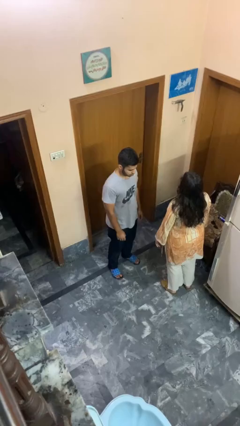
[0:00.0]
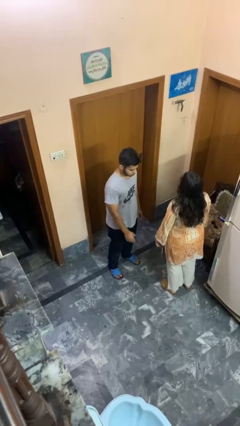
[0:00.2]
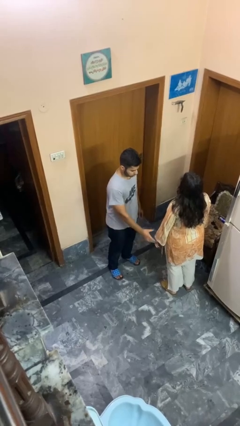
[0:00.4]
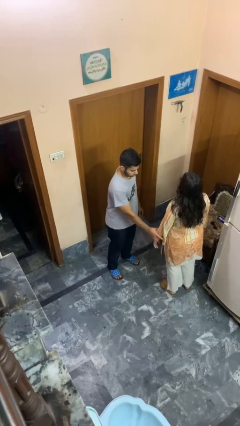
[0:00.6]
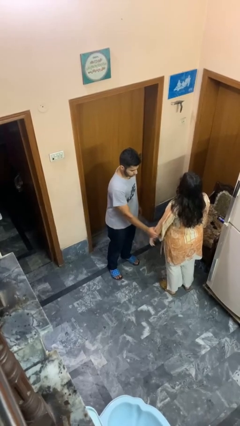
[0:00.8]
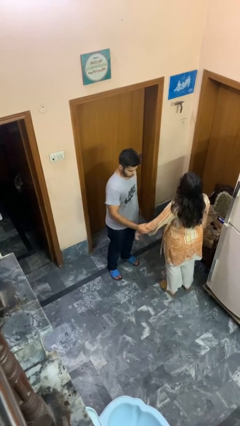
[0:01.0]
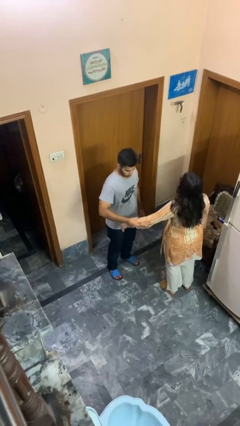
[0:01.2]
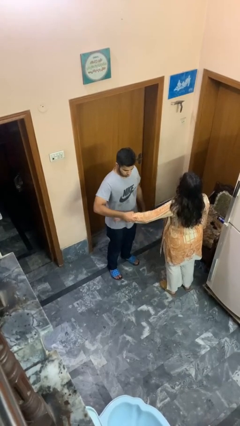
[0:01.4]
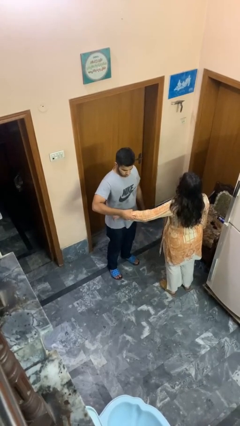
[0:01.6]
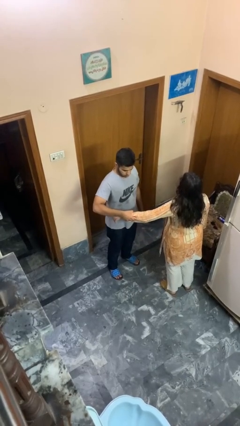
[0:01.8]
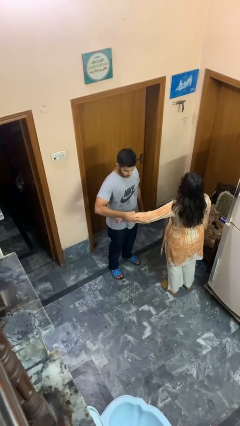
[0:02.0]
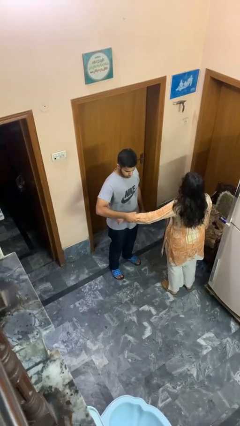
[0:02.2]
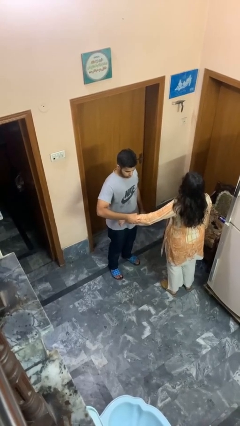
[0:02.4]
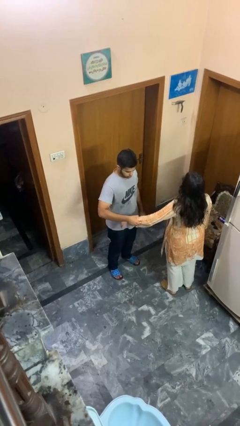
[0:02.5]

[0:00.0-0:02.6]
person grabs person by forearm

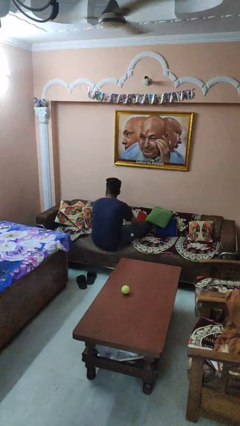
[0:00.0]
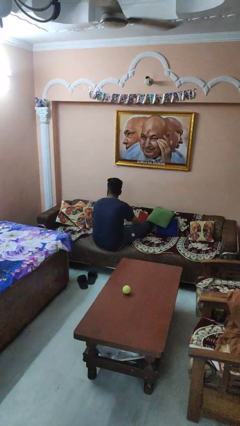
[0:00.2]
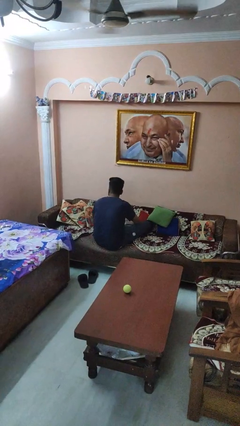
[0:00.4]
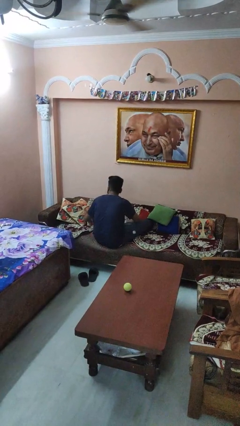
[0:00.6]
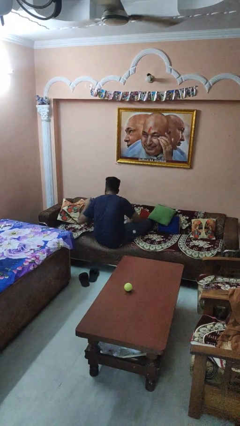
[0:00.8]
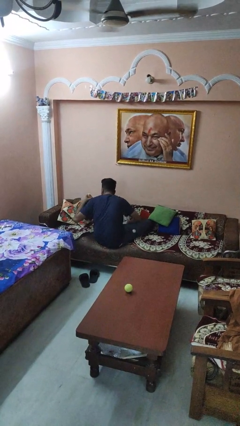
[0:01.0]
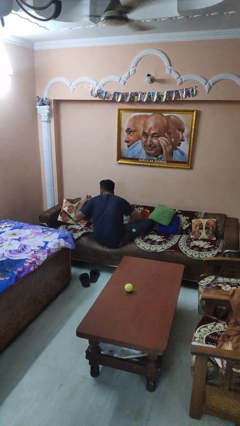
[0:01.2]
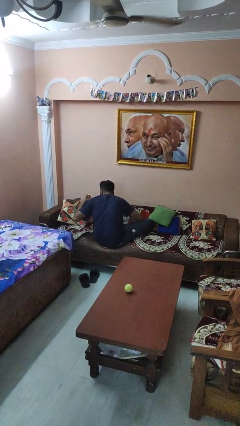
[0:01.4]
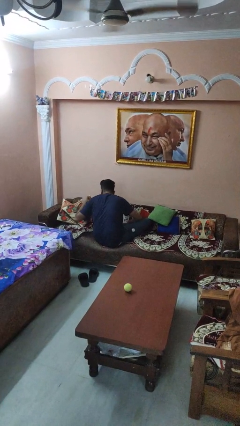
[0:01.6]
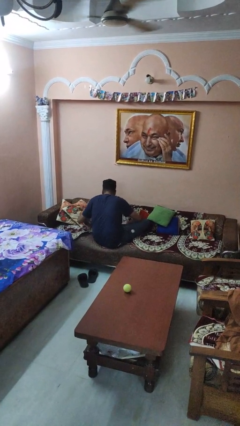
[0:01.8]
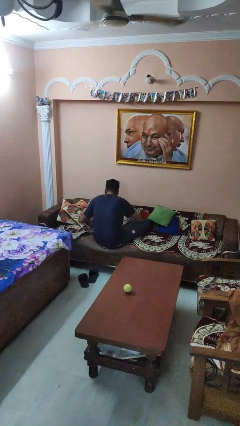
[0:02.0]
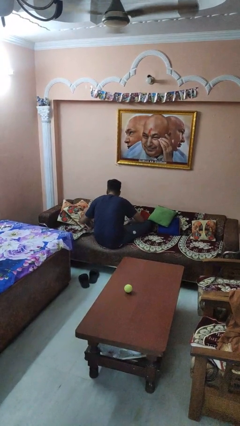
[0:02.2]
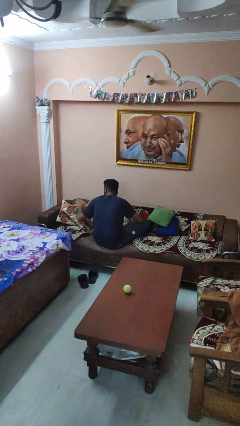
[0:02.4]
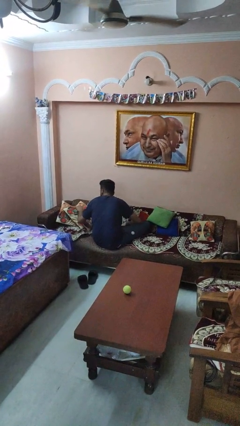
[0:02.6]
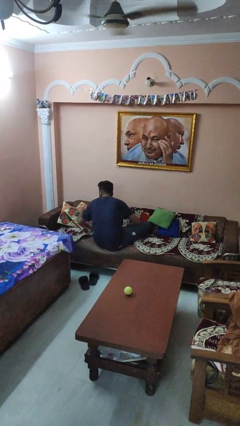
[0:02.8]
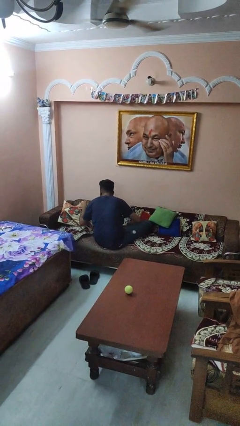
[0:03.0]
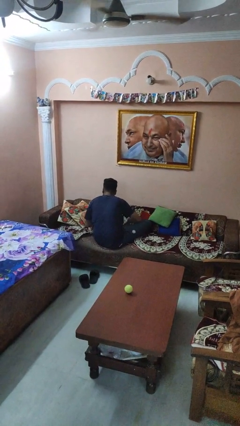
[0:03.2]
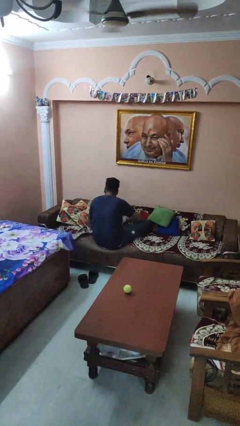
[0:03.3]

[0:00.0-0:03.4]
person searches in couch

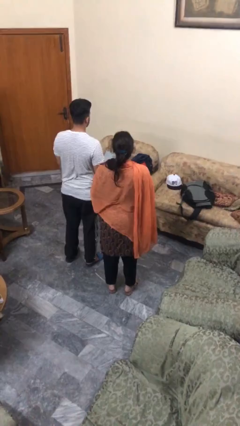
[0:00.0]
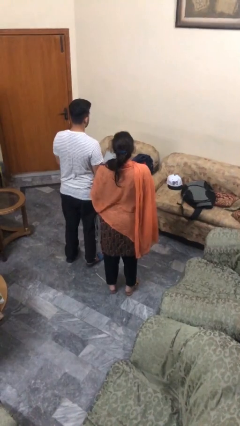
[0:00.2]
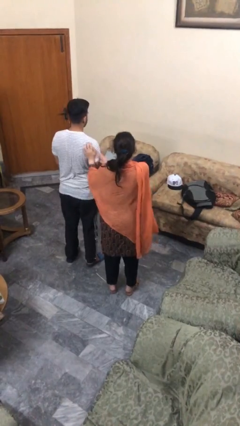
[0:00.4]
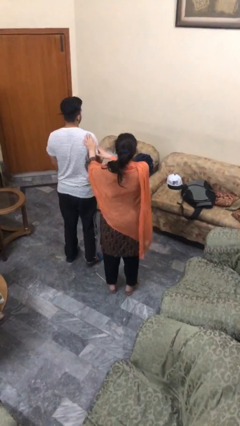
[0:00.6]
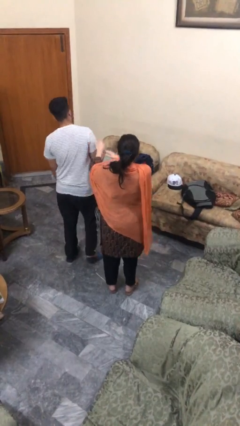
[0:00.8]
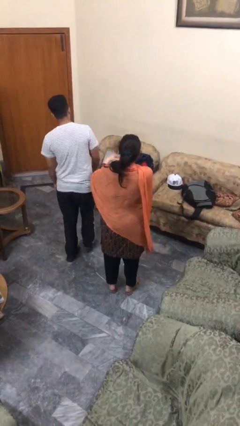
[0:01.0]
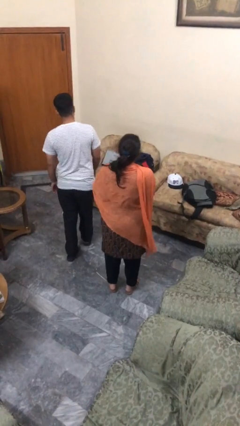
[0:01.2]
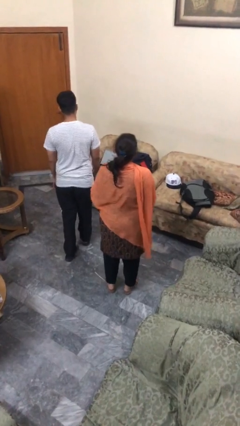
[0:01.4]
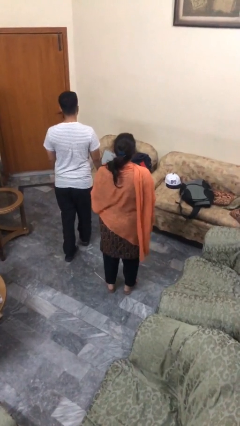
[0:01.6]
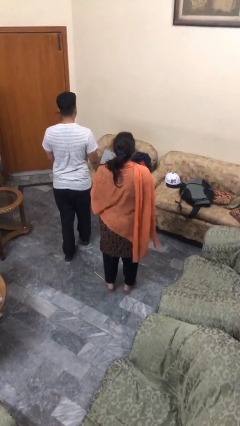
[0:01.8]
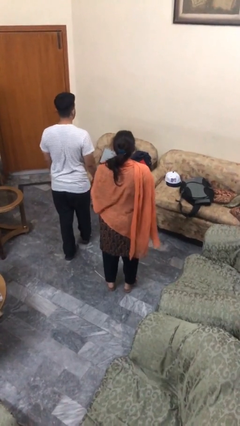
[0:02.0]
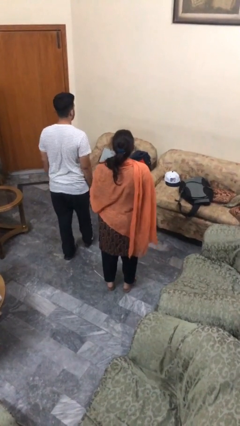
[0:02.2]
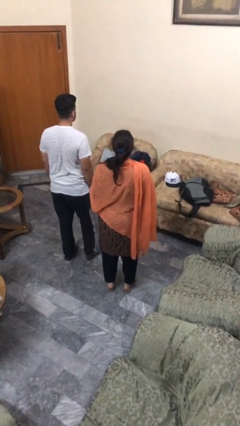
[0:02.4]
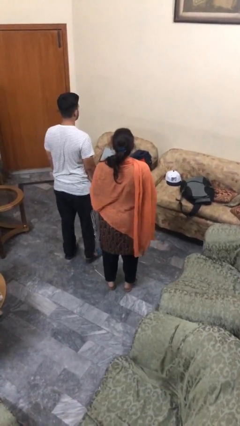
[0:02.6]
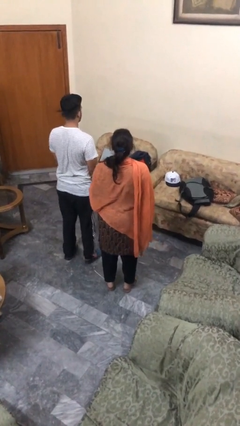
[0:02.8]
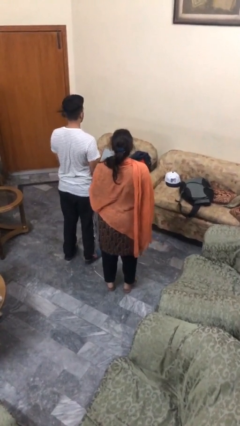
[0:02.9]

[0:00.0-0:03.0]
person shoves person

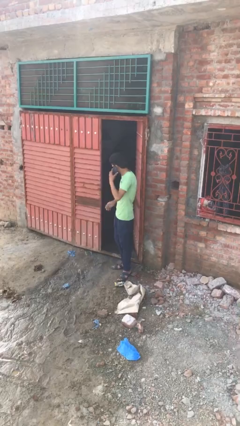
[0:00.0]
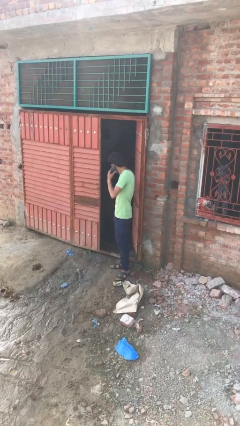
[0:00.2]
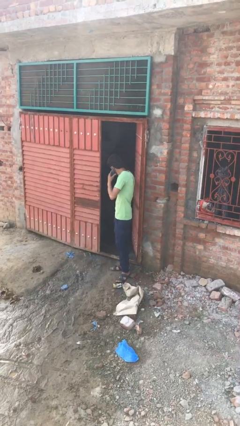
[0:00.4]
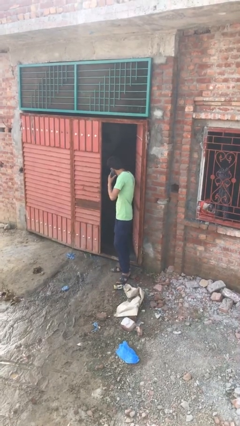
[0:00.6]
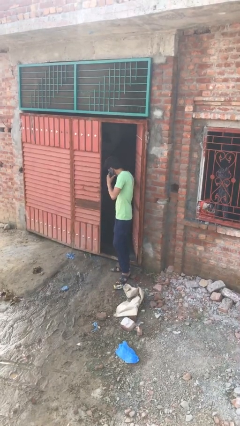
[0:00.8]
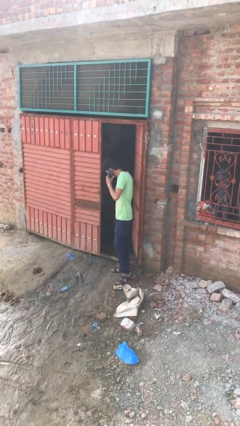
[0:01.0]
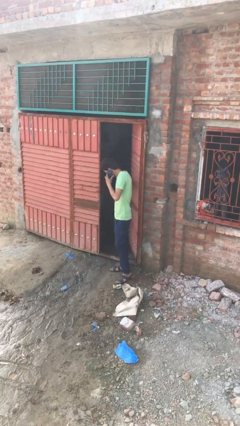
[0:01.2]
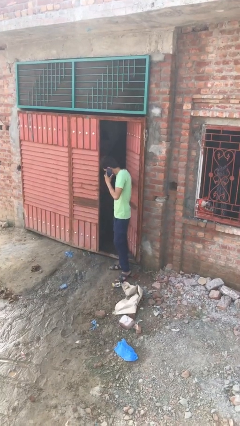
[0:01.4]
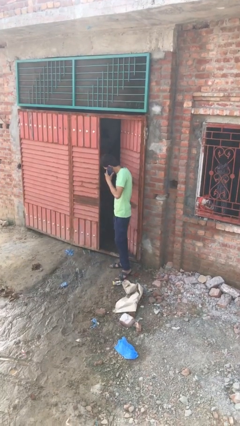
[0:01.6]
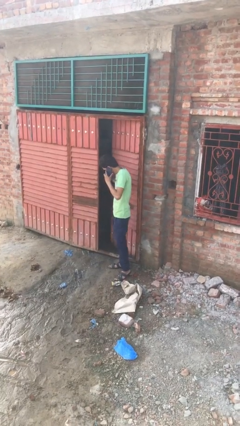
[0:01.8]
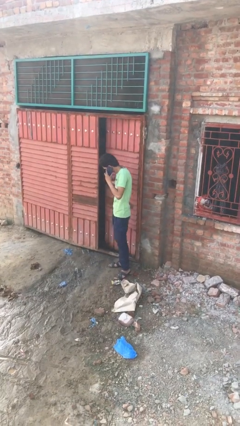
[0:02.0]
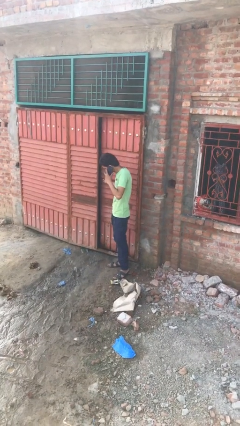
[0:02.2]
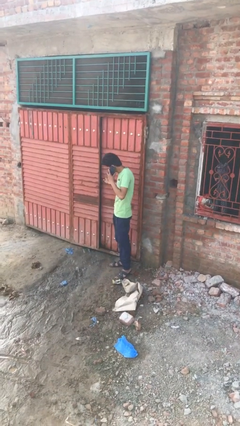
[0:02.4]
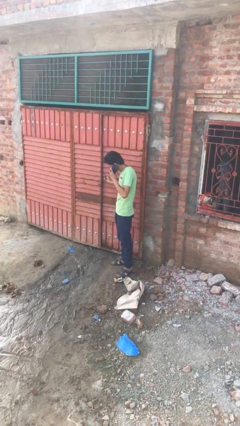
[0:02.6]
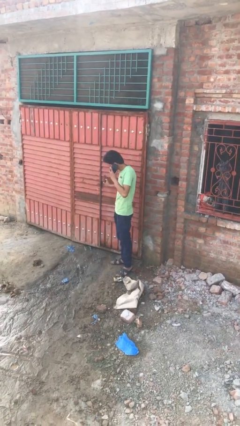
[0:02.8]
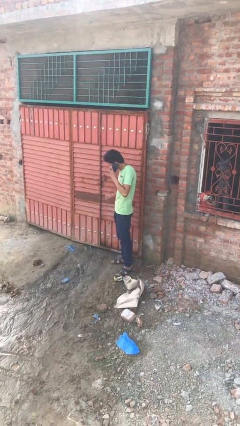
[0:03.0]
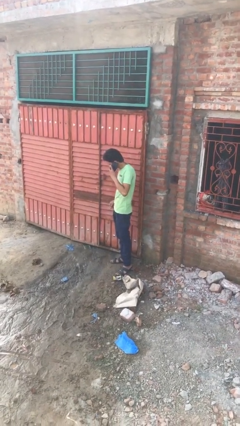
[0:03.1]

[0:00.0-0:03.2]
person closes facility door

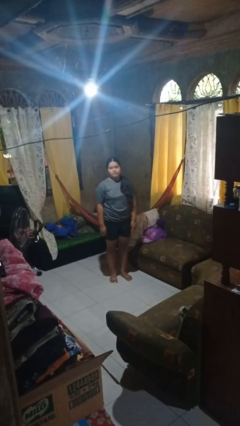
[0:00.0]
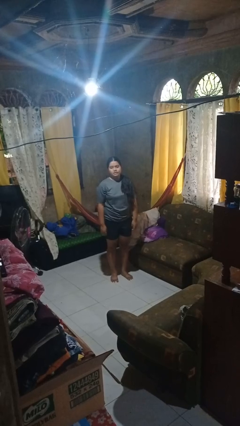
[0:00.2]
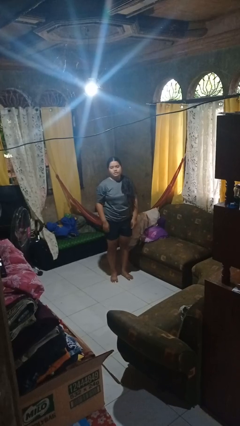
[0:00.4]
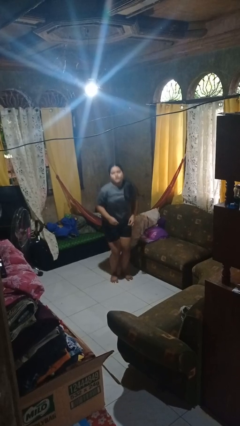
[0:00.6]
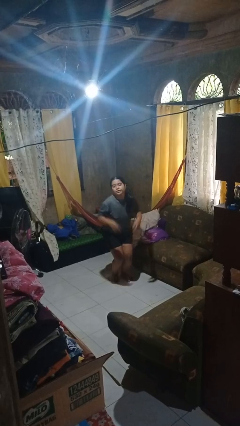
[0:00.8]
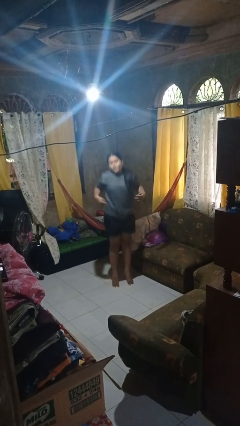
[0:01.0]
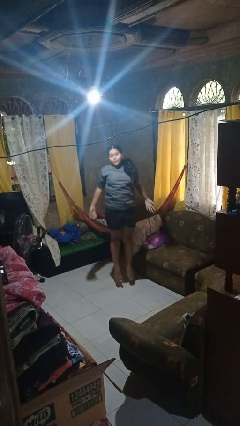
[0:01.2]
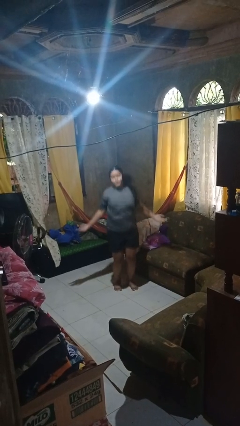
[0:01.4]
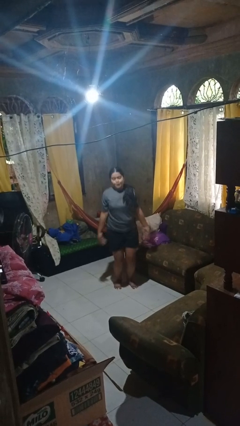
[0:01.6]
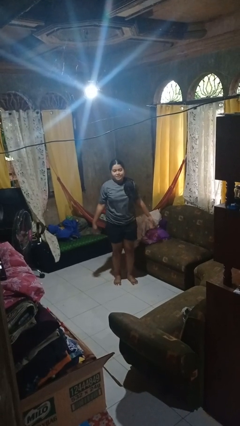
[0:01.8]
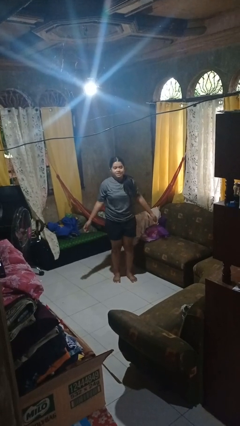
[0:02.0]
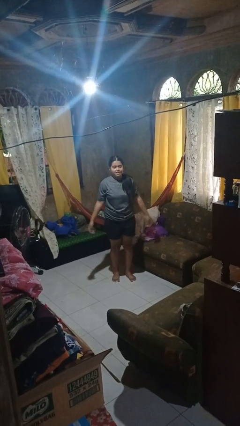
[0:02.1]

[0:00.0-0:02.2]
person jumps

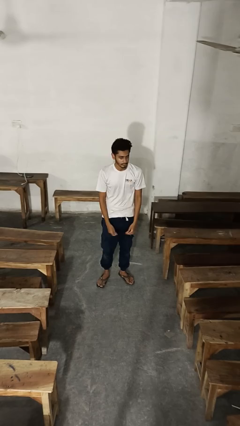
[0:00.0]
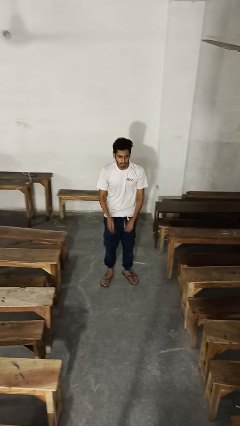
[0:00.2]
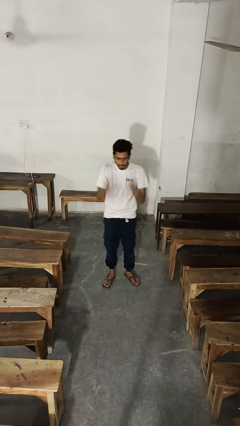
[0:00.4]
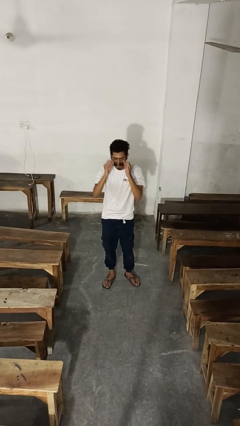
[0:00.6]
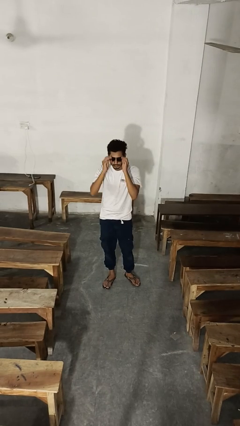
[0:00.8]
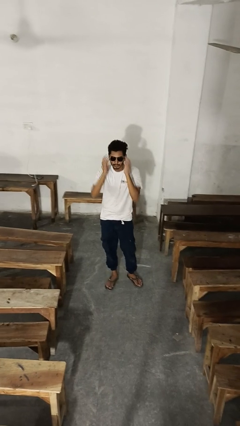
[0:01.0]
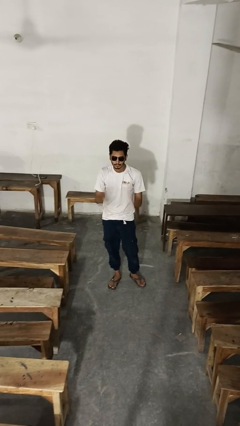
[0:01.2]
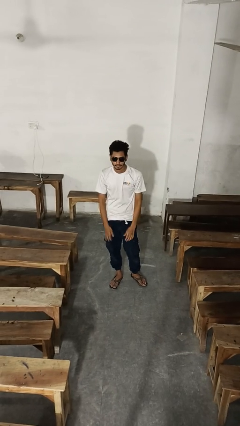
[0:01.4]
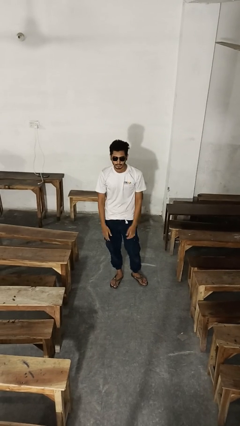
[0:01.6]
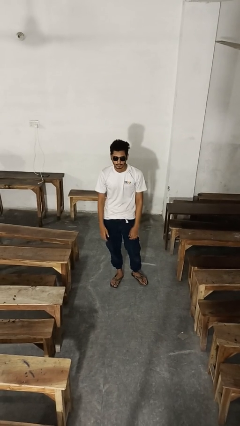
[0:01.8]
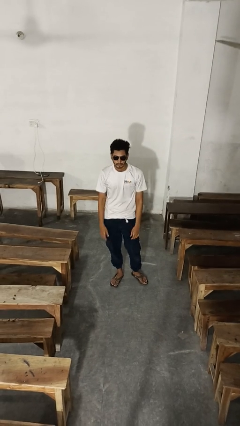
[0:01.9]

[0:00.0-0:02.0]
person puts on sunglasses

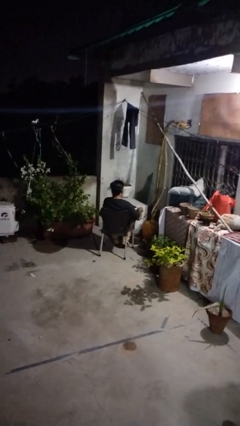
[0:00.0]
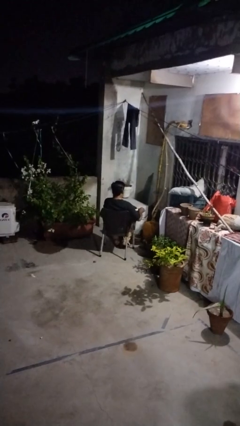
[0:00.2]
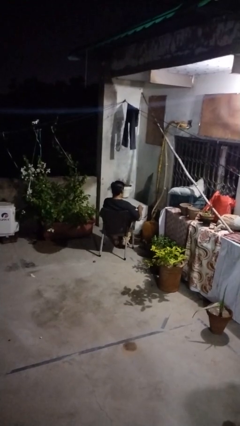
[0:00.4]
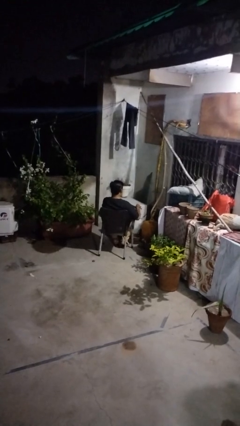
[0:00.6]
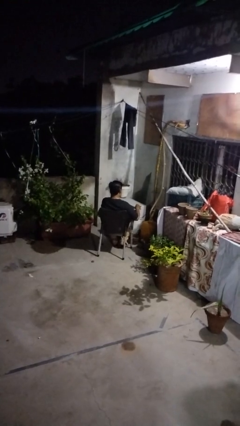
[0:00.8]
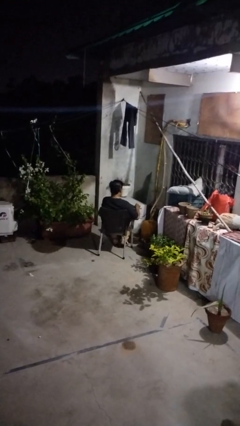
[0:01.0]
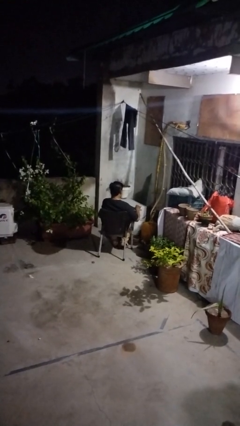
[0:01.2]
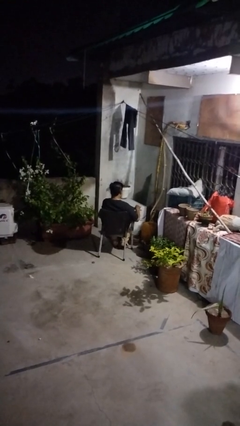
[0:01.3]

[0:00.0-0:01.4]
person stirs mug
